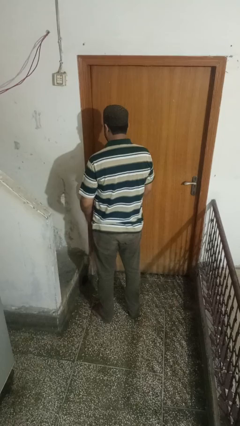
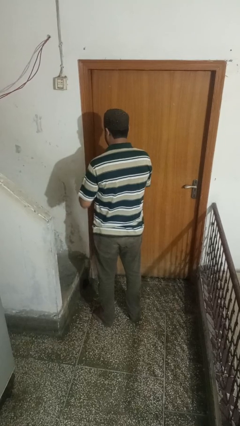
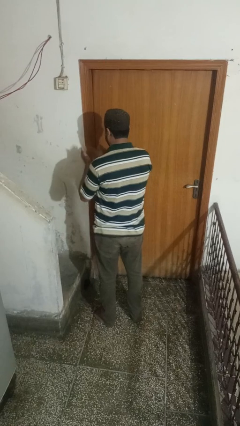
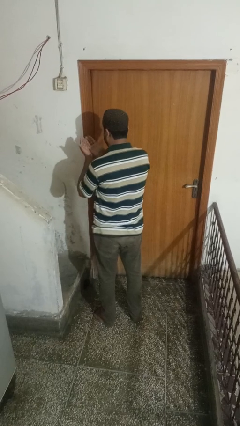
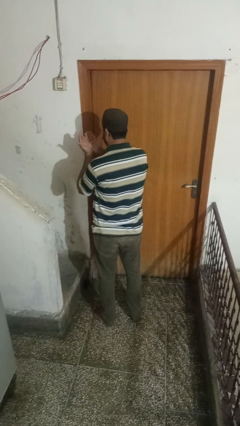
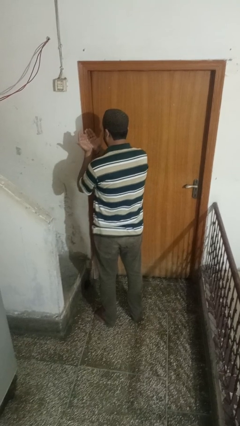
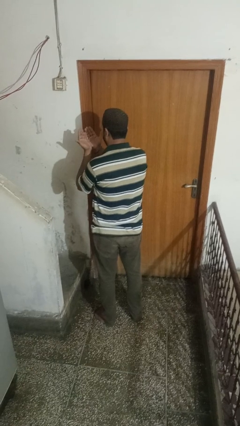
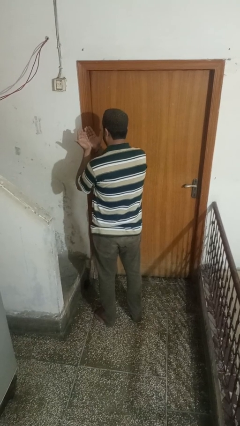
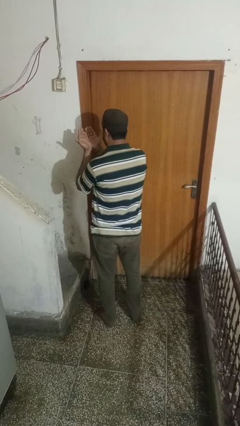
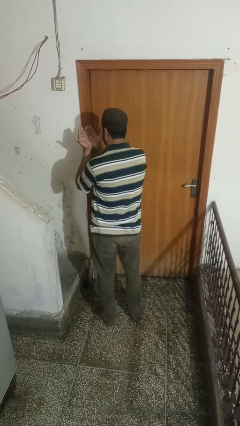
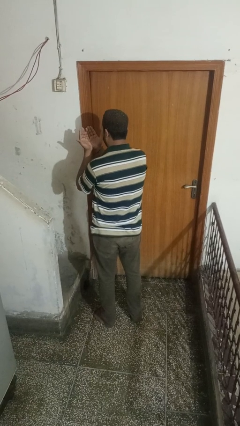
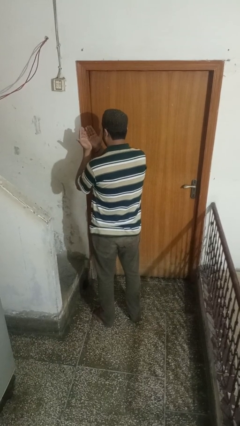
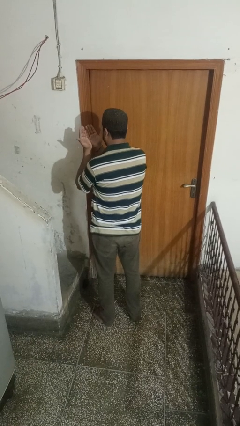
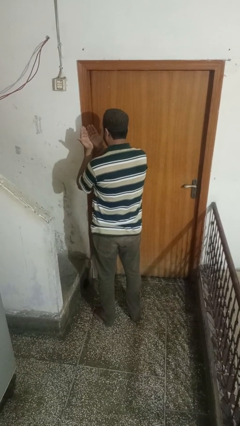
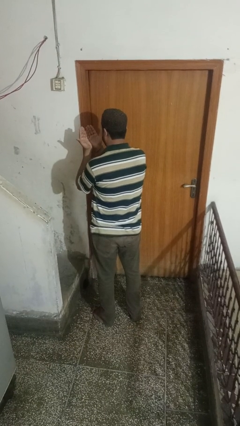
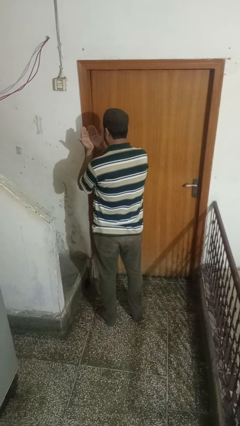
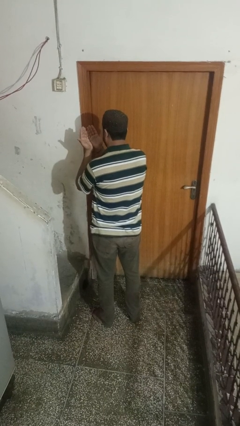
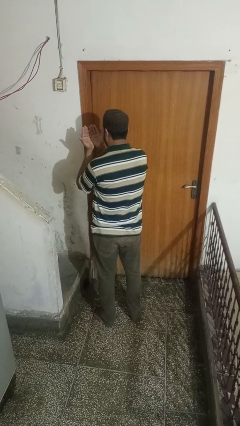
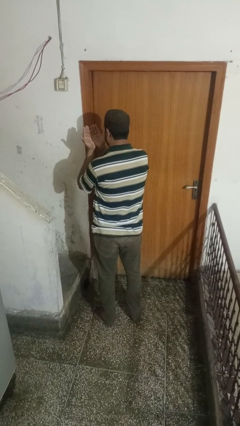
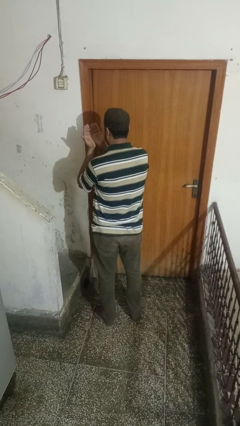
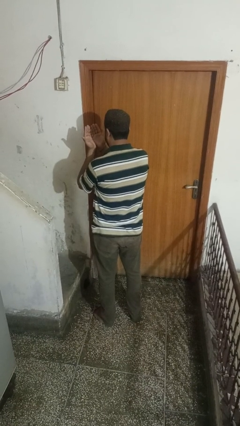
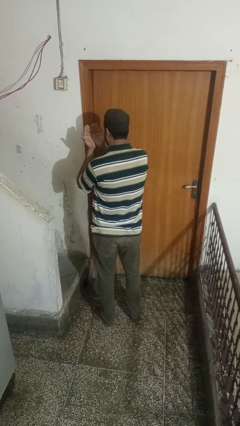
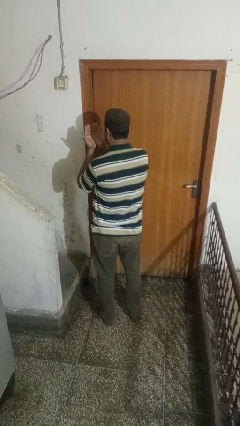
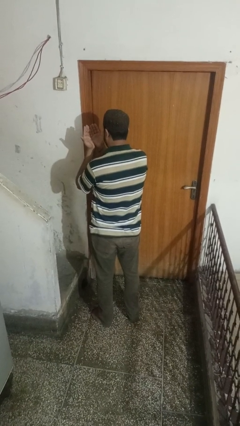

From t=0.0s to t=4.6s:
person prays

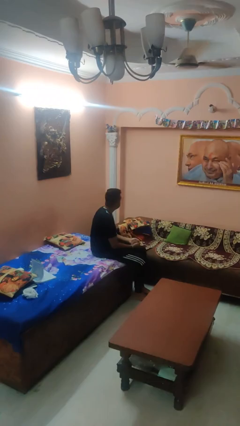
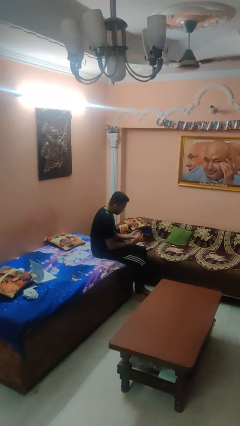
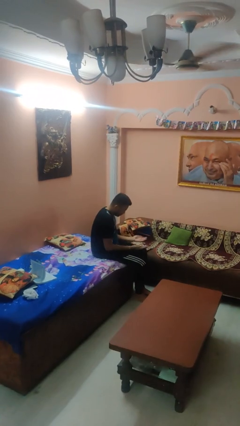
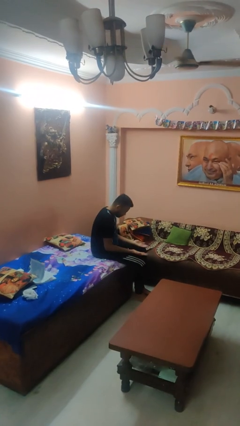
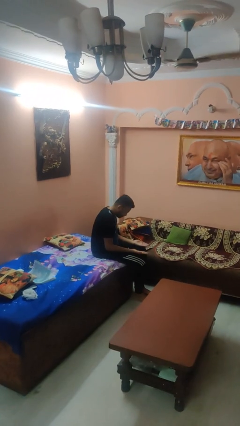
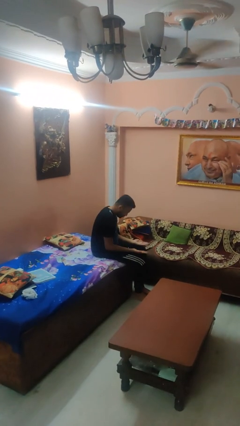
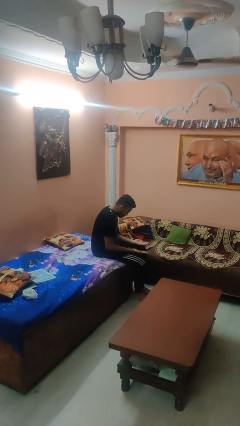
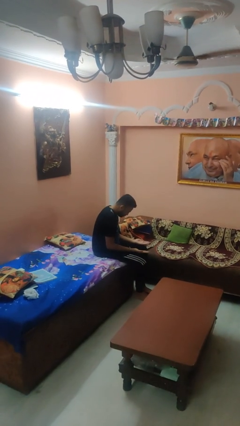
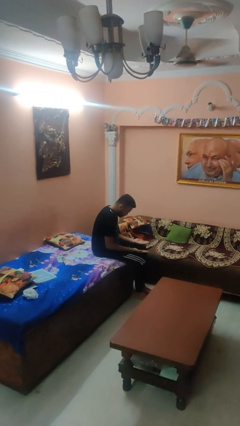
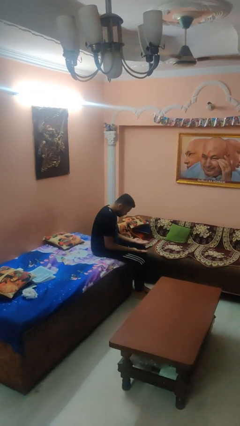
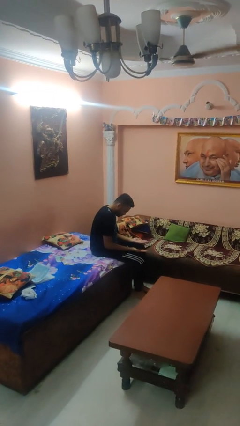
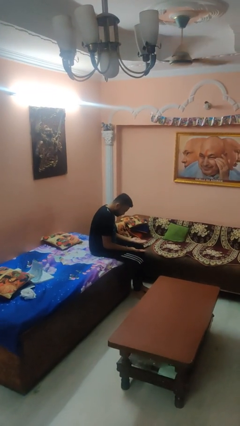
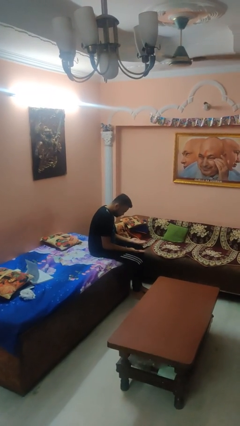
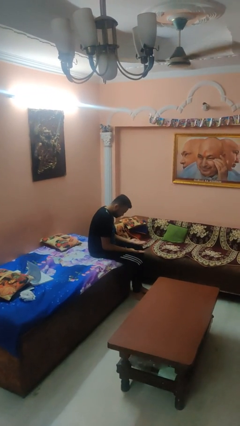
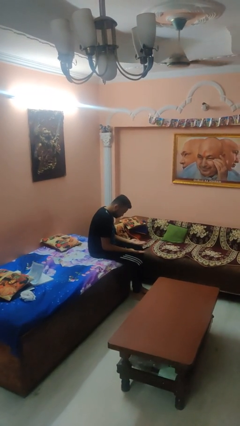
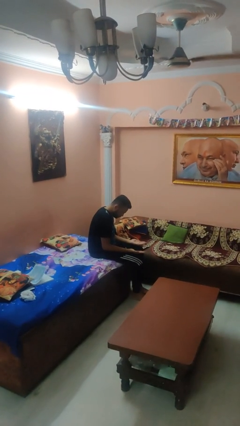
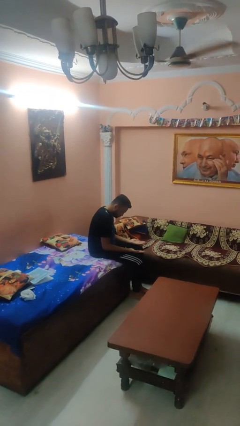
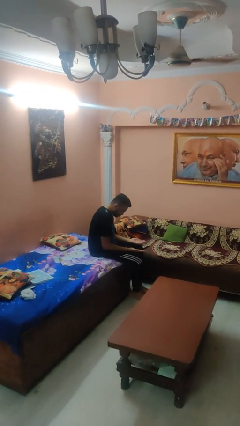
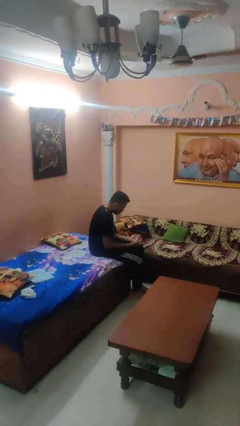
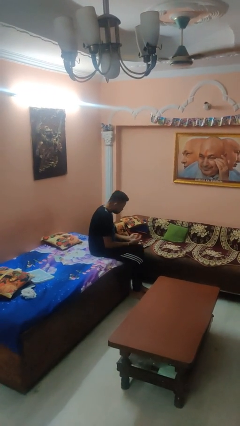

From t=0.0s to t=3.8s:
person looks at hands in lap

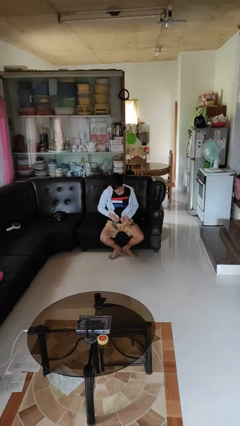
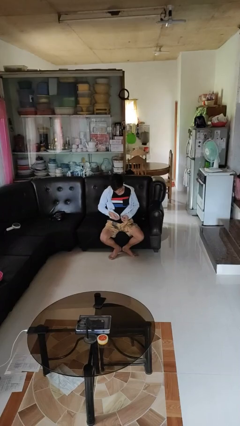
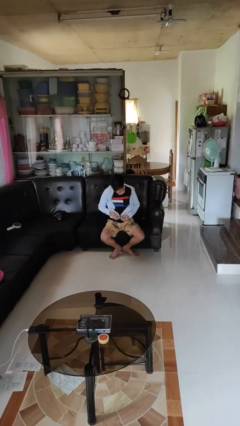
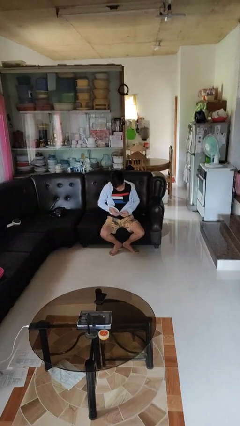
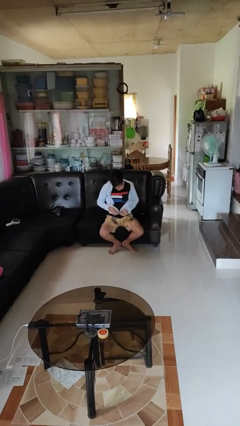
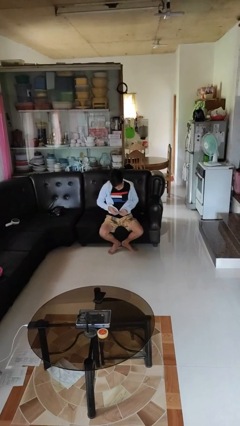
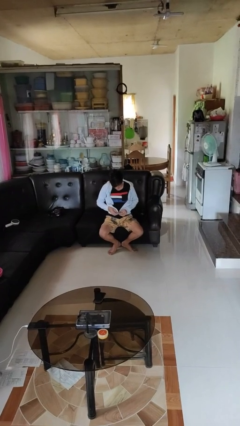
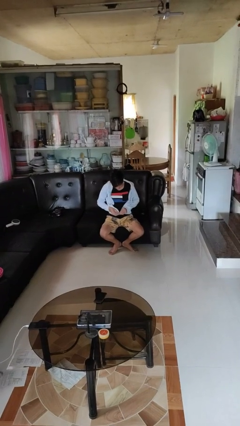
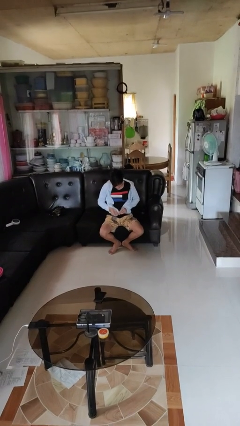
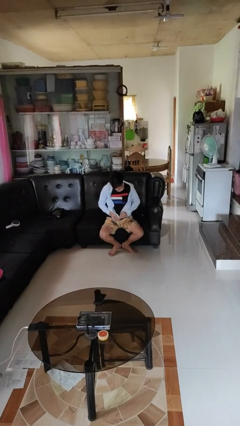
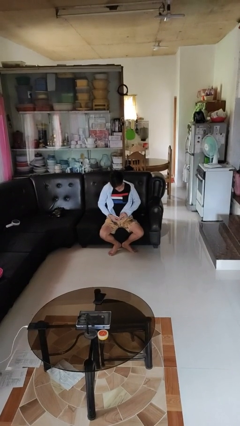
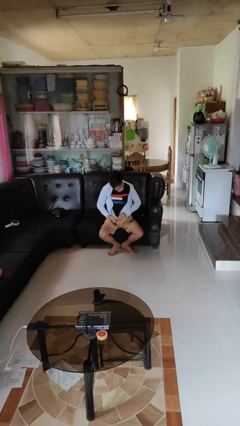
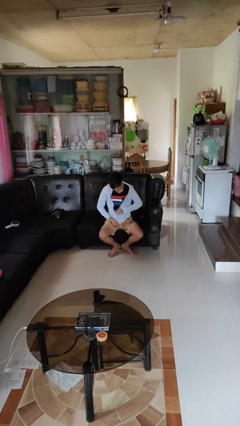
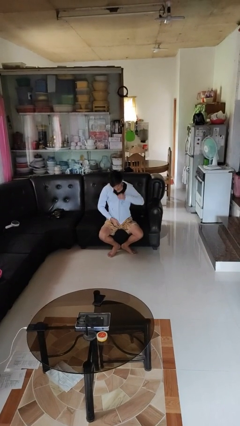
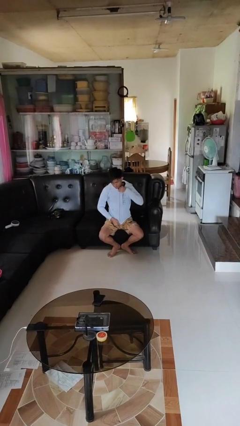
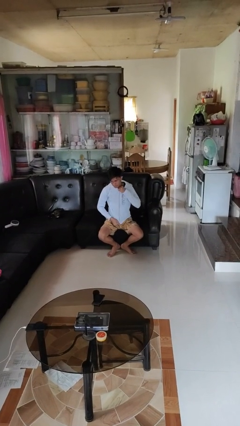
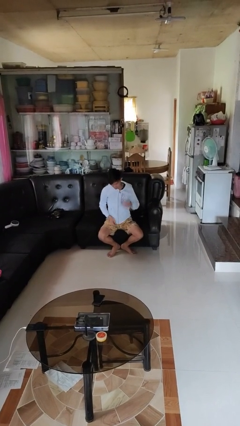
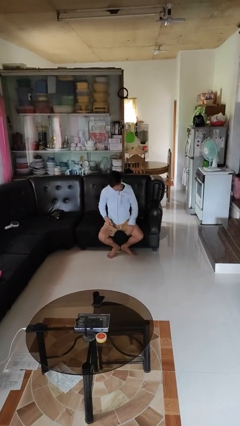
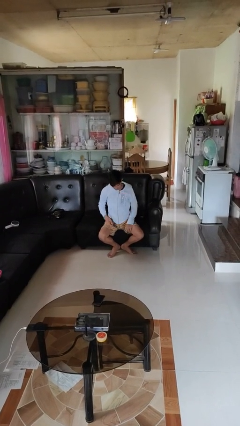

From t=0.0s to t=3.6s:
person zips up jacket

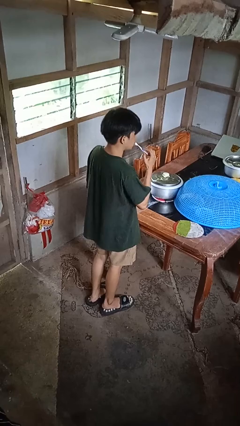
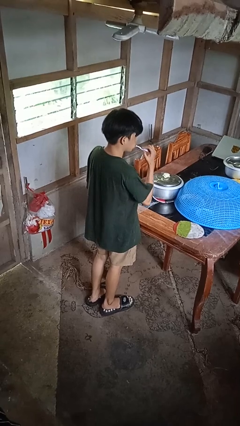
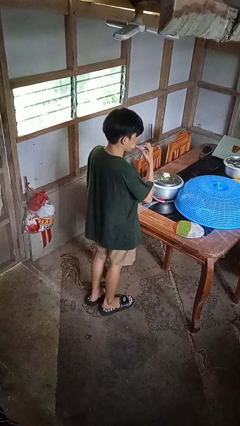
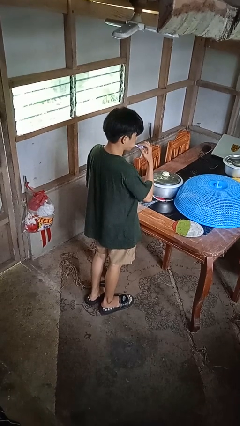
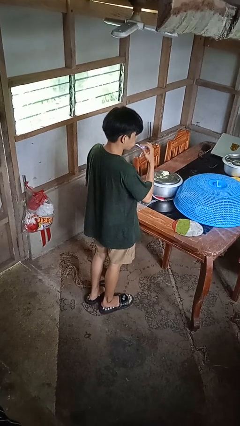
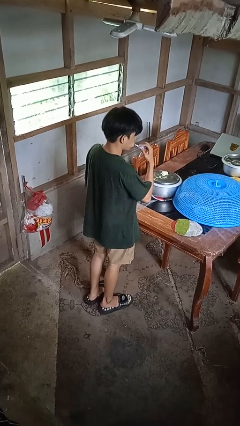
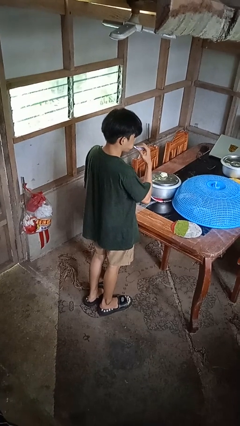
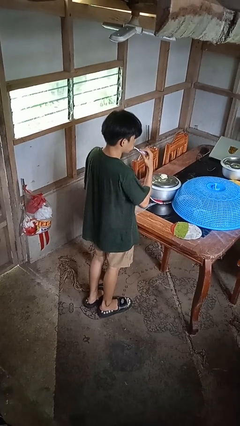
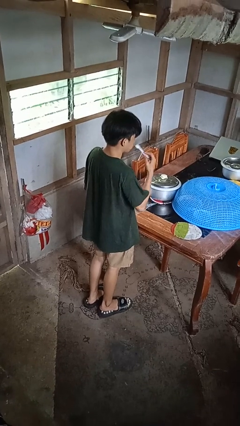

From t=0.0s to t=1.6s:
person brushes teeth

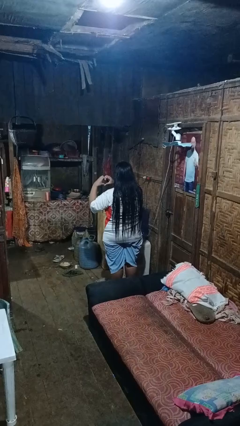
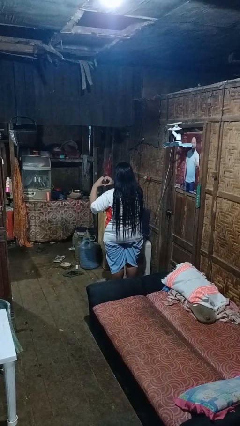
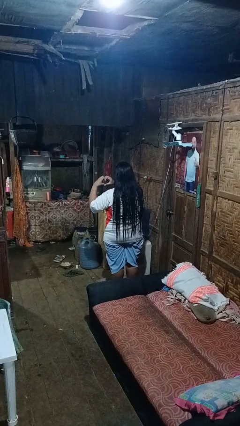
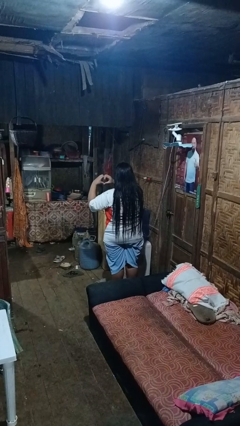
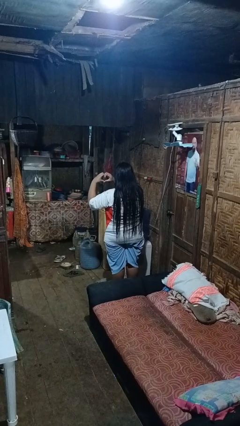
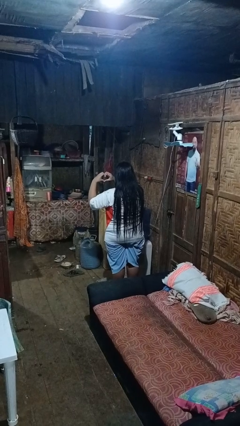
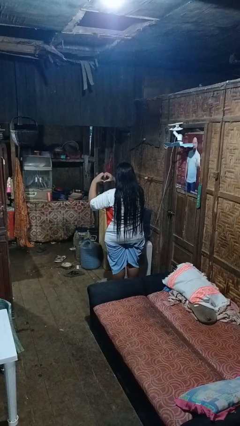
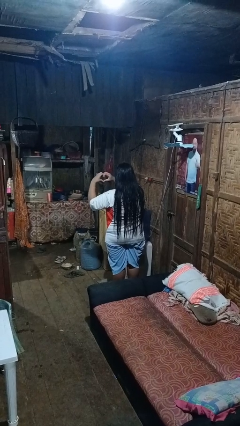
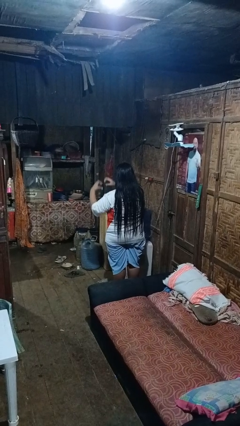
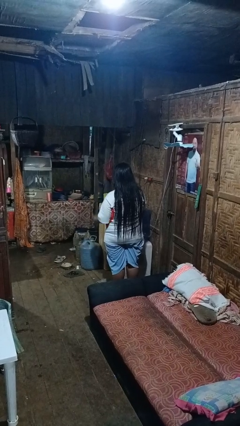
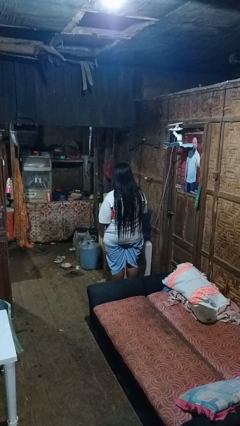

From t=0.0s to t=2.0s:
person gestures heart

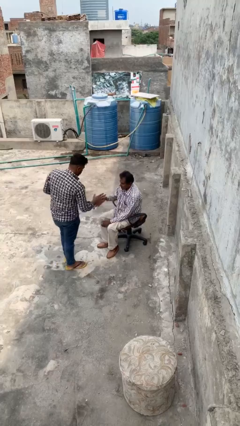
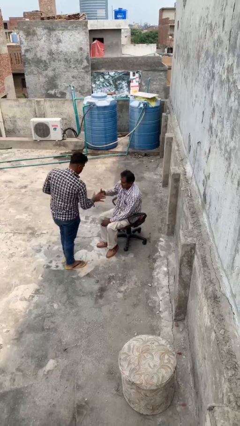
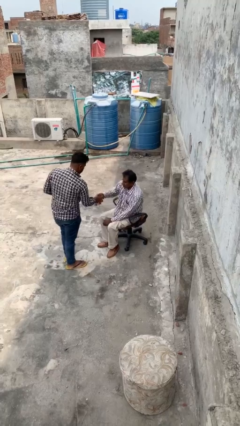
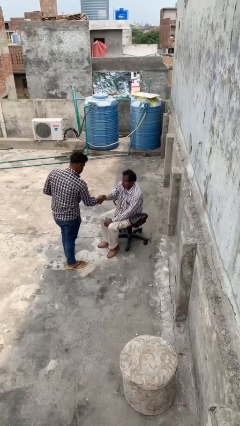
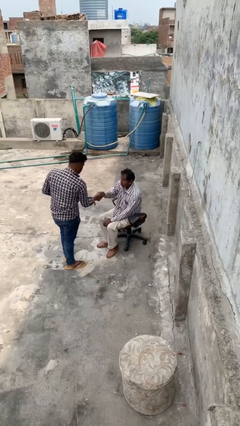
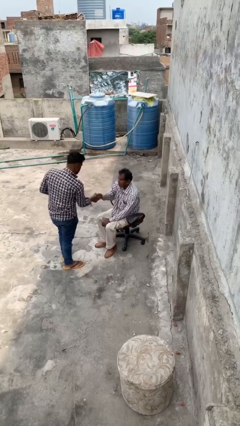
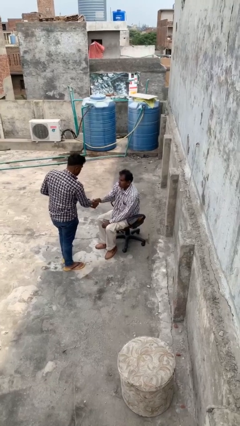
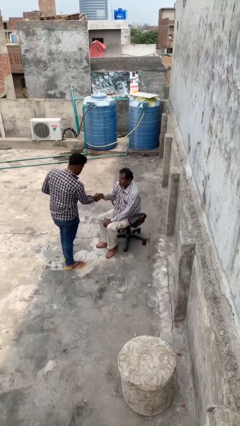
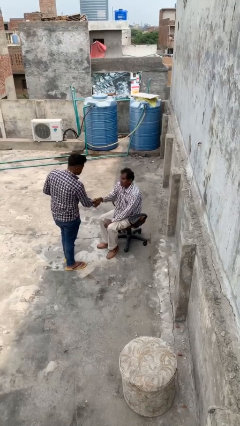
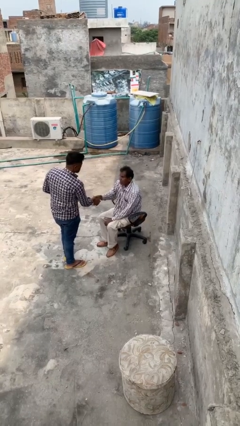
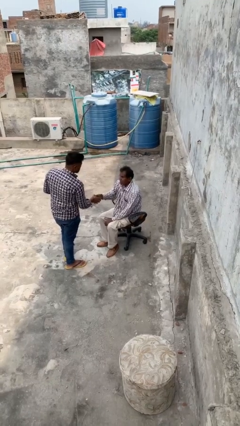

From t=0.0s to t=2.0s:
person shakes hand
